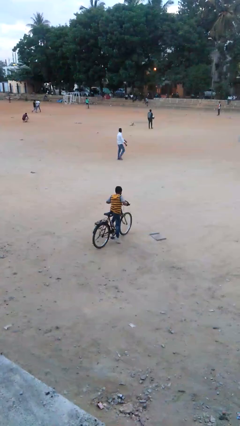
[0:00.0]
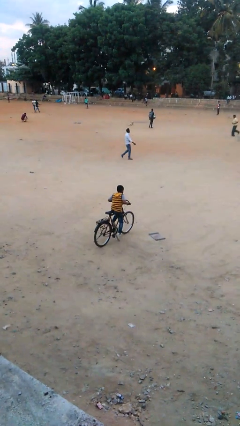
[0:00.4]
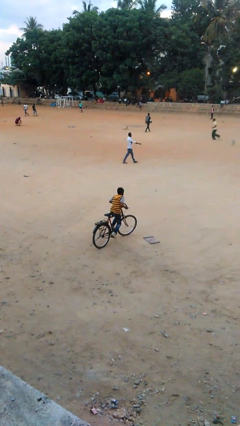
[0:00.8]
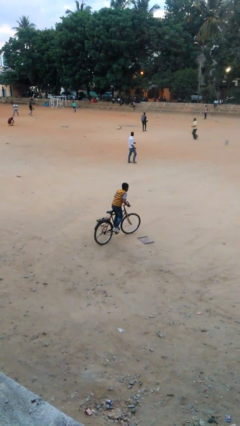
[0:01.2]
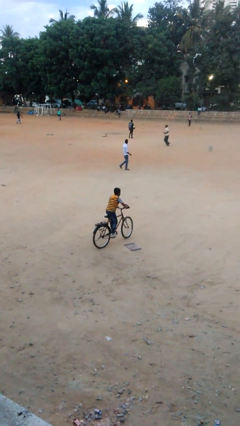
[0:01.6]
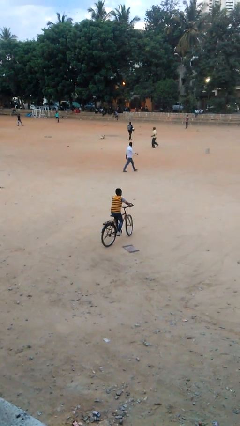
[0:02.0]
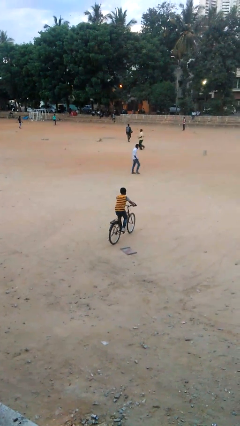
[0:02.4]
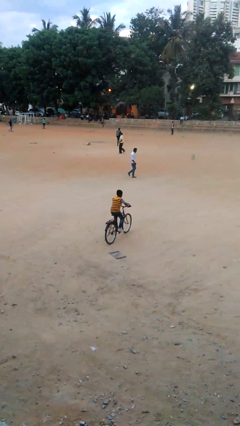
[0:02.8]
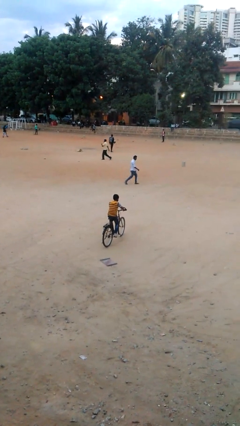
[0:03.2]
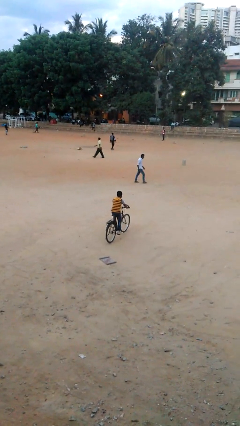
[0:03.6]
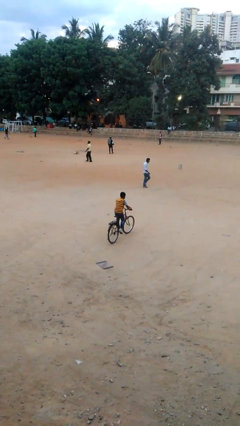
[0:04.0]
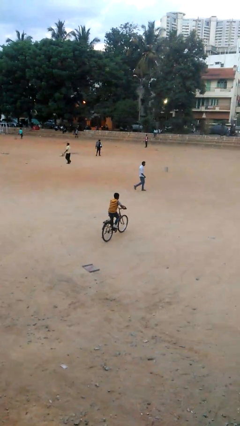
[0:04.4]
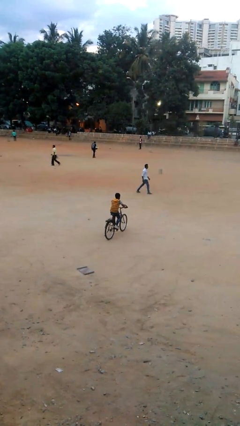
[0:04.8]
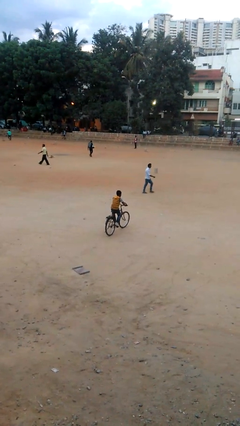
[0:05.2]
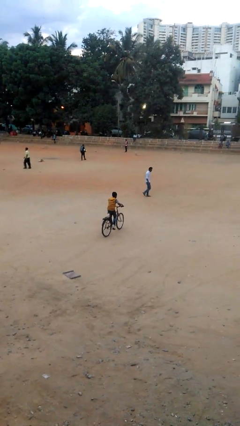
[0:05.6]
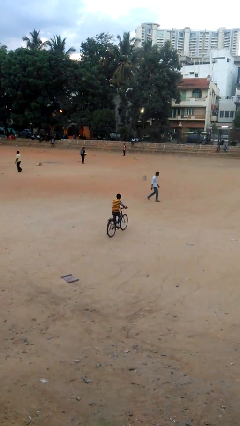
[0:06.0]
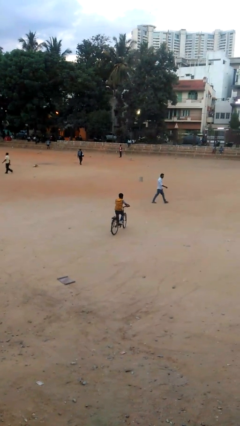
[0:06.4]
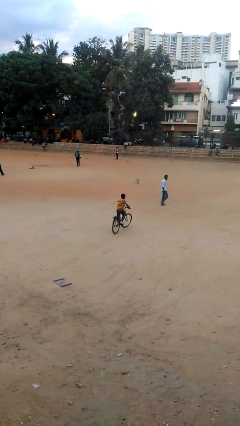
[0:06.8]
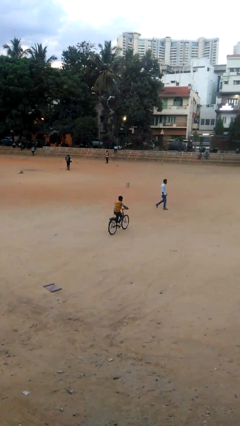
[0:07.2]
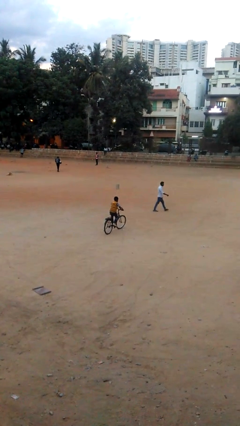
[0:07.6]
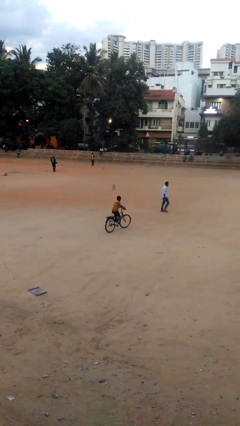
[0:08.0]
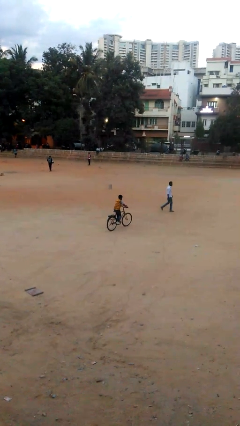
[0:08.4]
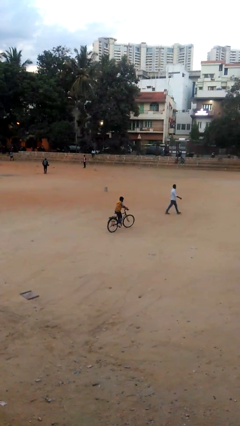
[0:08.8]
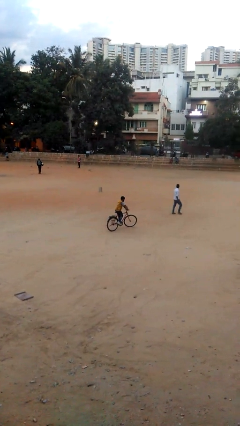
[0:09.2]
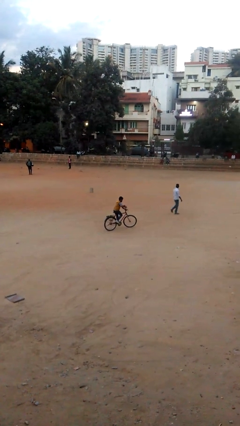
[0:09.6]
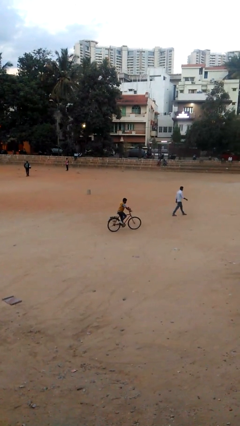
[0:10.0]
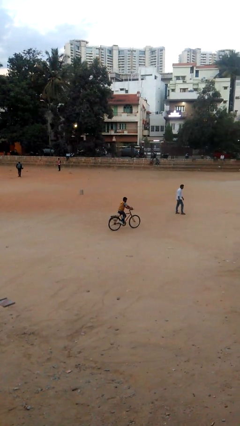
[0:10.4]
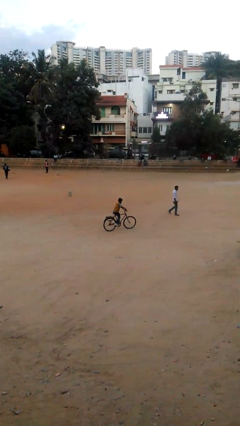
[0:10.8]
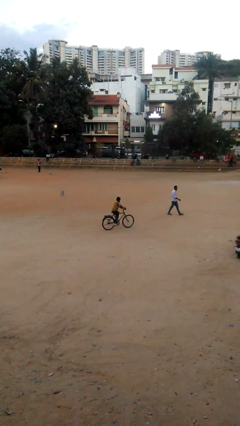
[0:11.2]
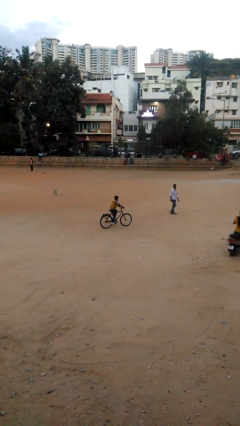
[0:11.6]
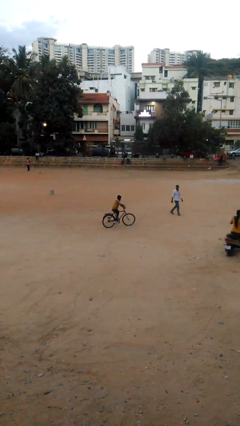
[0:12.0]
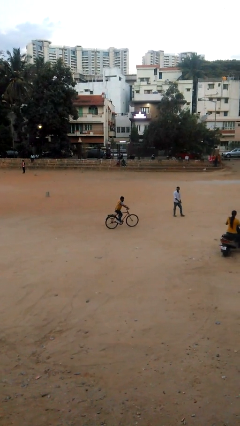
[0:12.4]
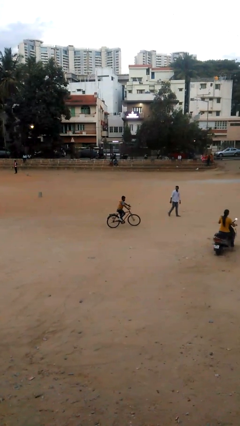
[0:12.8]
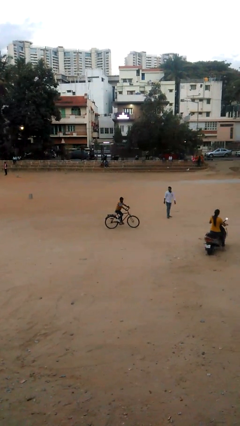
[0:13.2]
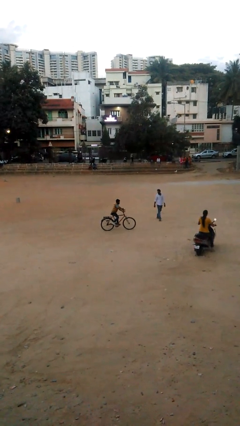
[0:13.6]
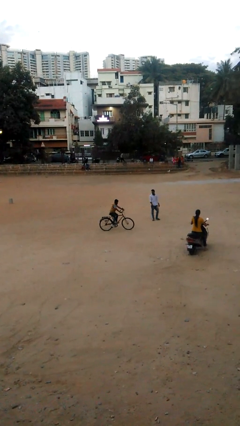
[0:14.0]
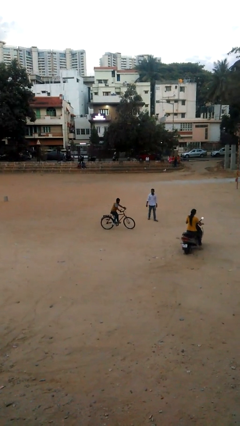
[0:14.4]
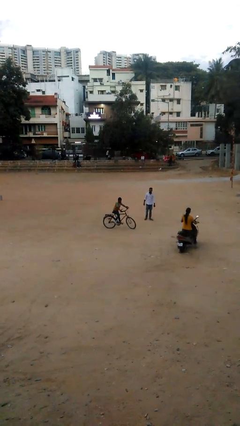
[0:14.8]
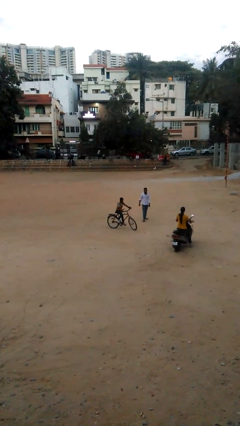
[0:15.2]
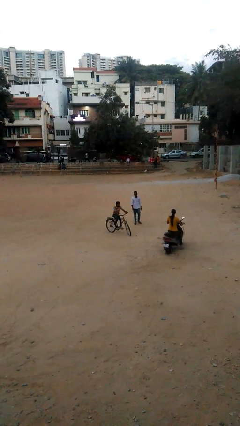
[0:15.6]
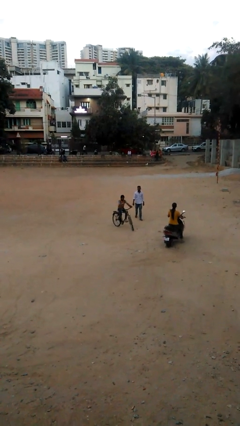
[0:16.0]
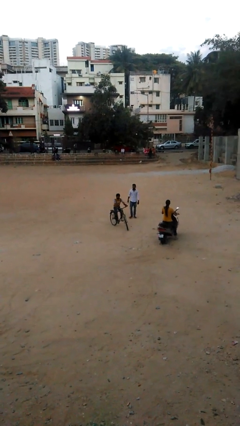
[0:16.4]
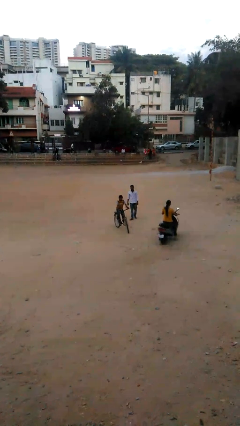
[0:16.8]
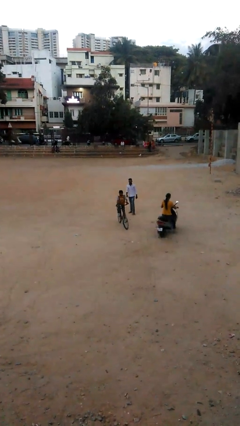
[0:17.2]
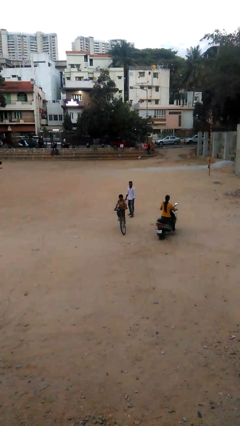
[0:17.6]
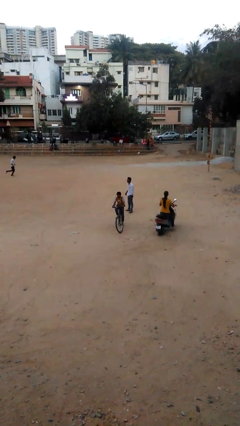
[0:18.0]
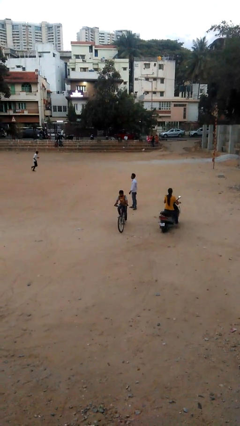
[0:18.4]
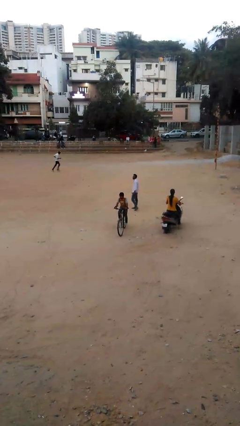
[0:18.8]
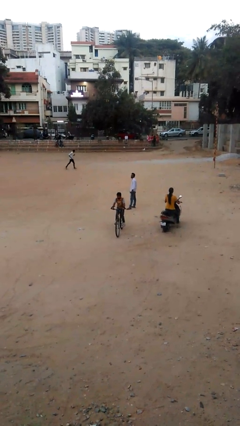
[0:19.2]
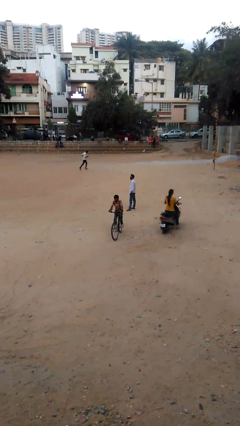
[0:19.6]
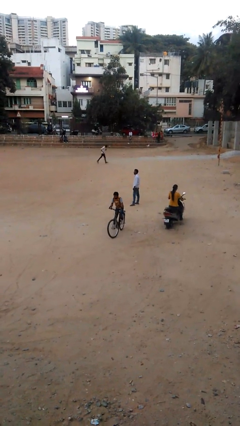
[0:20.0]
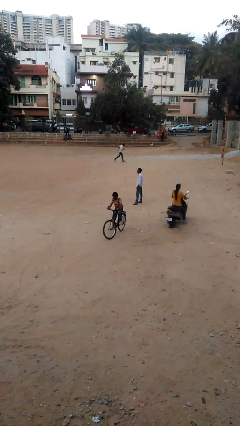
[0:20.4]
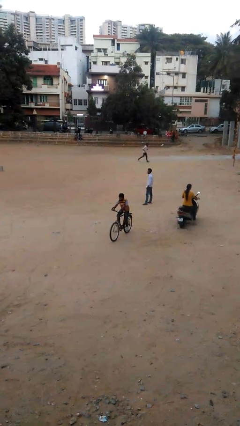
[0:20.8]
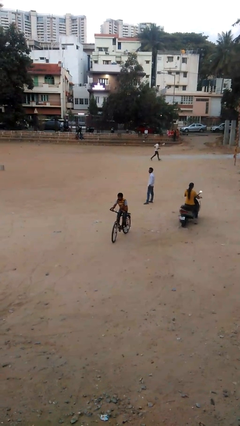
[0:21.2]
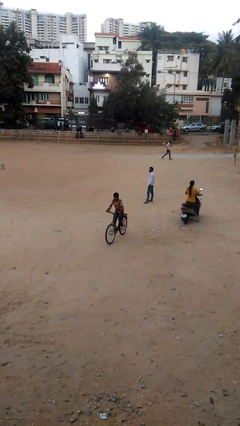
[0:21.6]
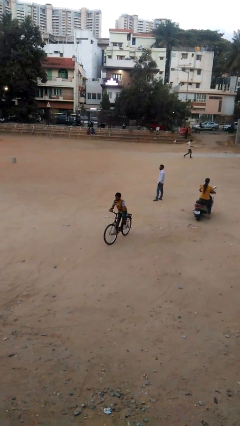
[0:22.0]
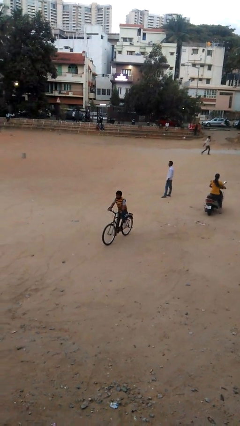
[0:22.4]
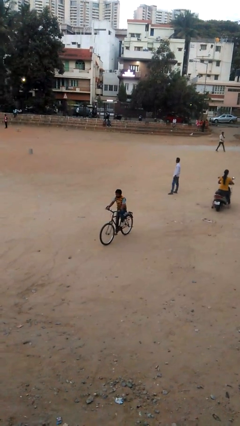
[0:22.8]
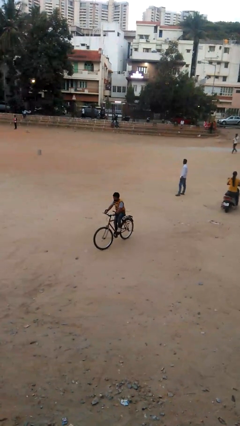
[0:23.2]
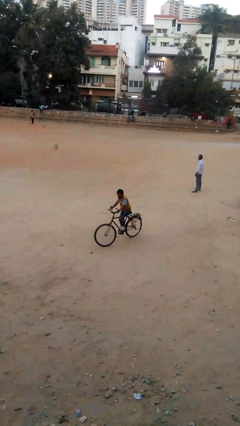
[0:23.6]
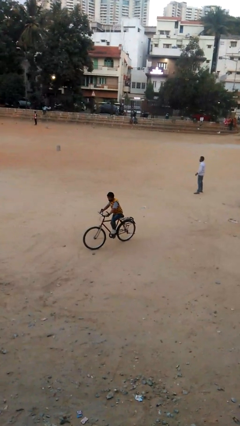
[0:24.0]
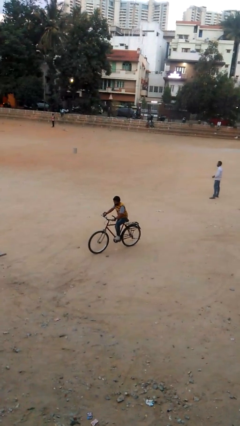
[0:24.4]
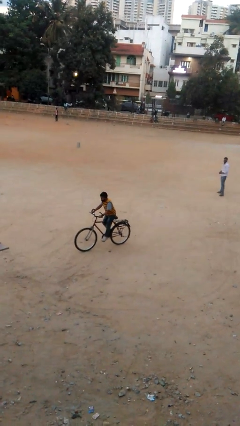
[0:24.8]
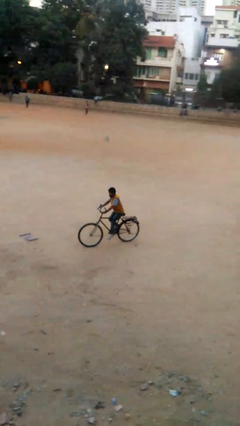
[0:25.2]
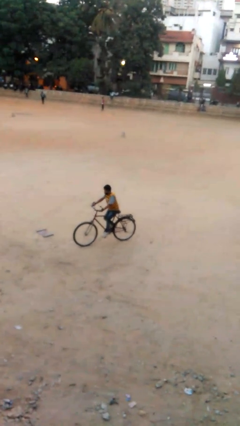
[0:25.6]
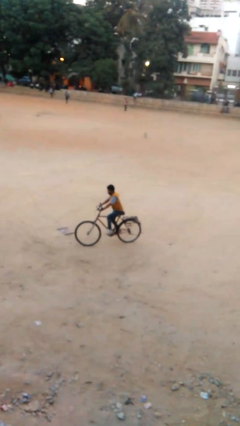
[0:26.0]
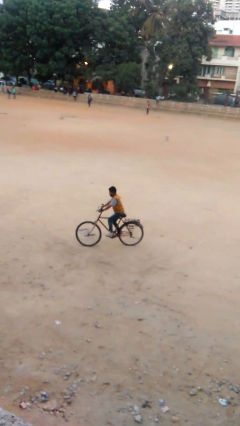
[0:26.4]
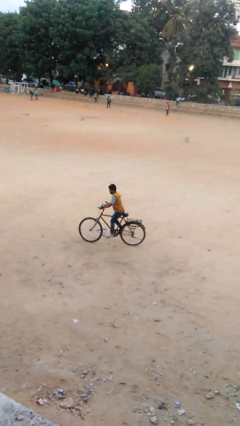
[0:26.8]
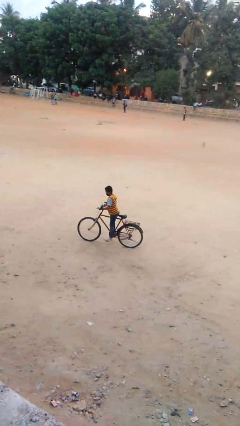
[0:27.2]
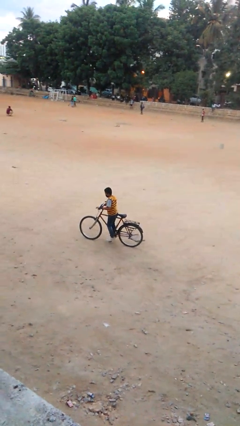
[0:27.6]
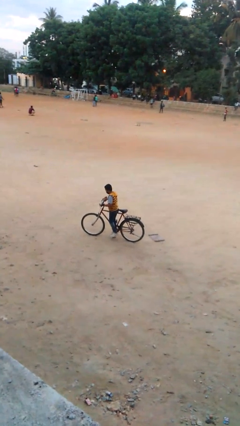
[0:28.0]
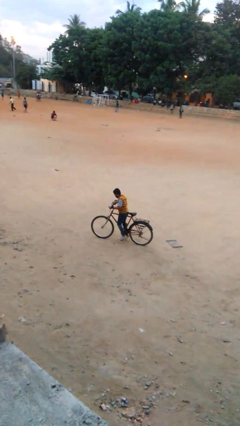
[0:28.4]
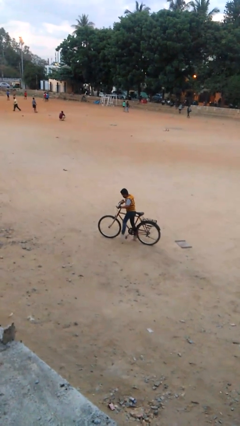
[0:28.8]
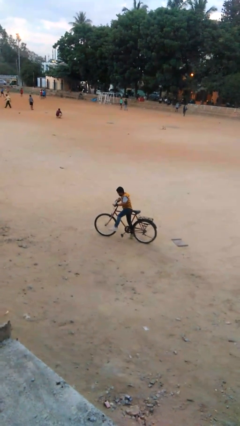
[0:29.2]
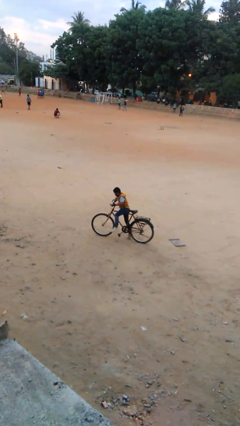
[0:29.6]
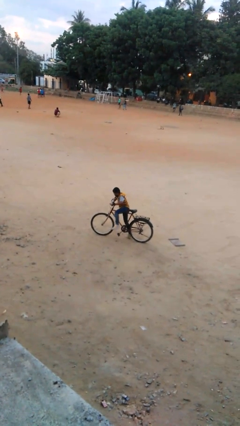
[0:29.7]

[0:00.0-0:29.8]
person rides bicycle

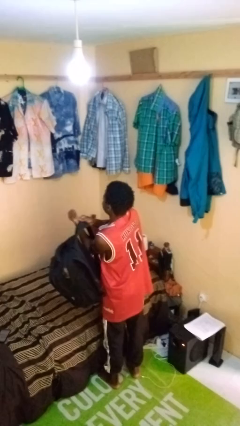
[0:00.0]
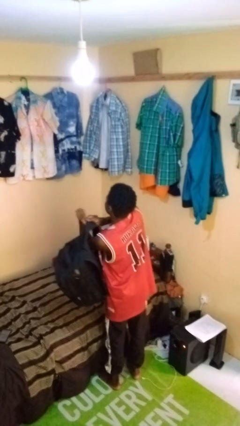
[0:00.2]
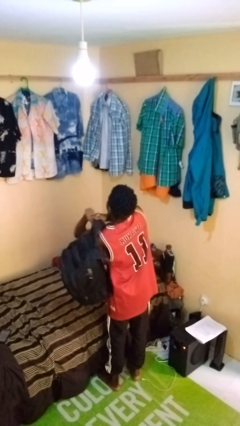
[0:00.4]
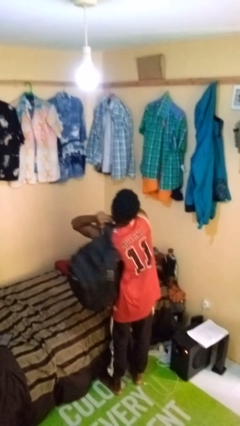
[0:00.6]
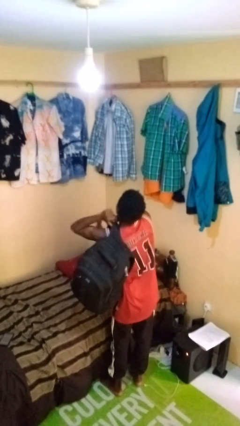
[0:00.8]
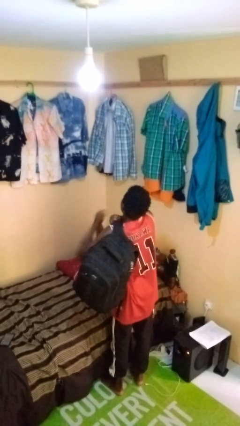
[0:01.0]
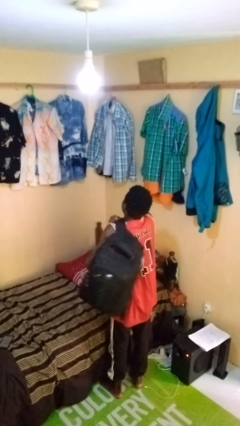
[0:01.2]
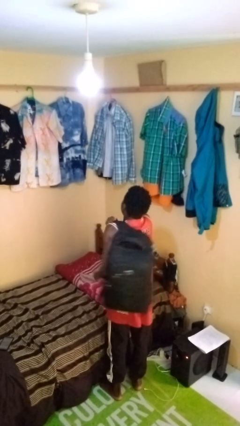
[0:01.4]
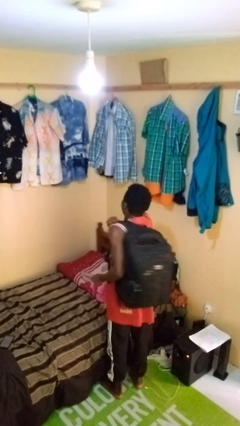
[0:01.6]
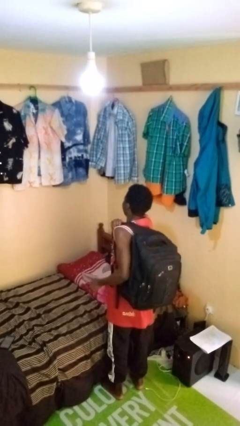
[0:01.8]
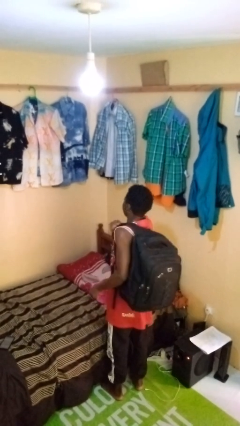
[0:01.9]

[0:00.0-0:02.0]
person puts on backpack

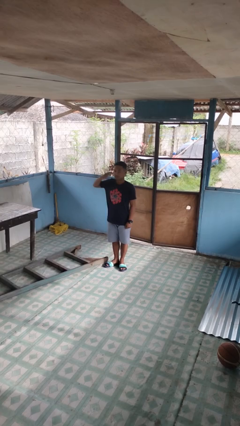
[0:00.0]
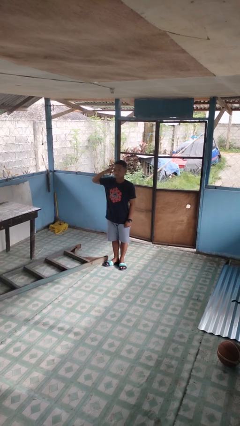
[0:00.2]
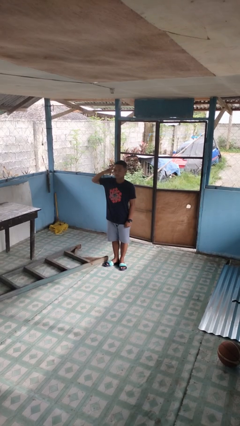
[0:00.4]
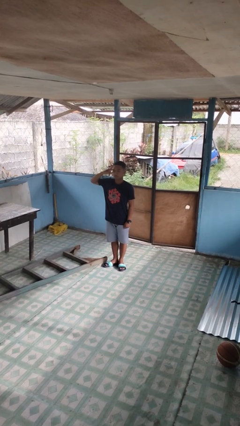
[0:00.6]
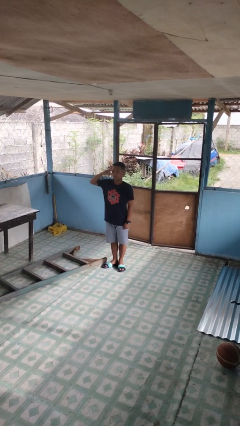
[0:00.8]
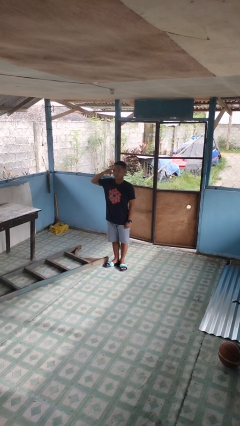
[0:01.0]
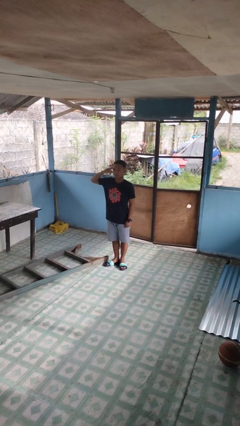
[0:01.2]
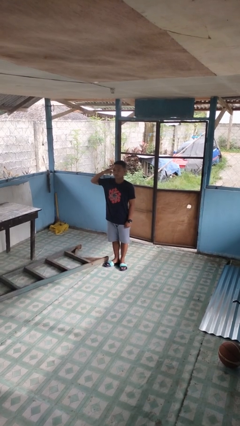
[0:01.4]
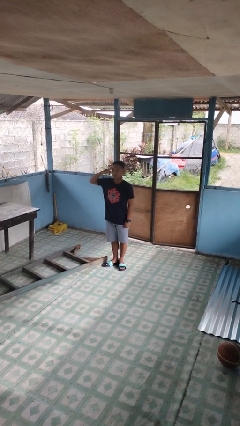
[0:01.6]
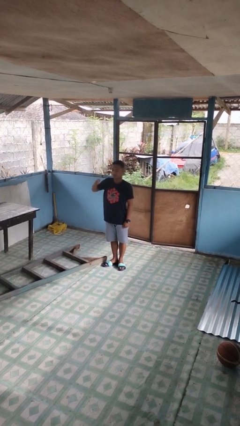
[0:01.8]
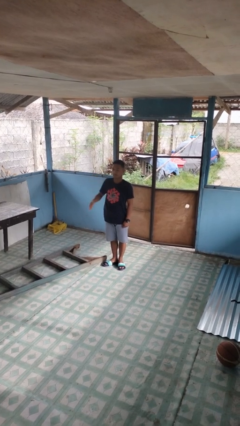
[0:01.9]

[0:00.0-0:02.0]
person salutes
